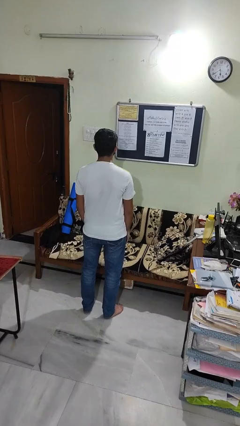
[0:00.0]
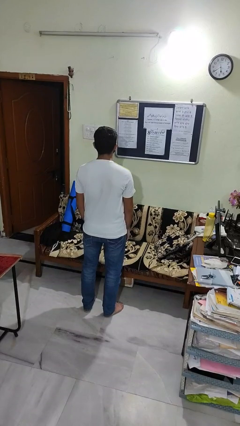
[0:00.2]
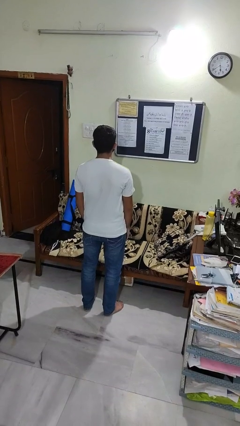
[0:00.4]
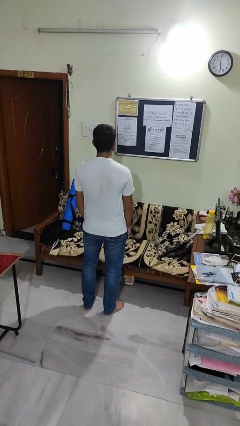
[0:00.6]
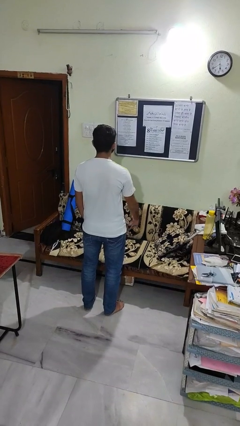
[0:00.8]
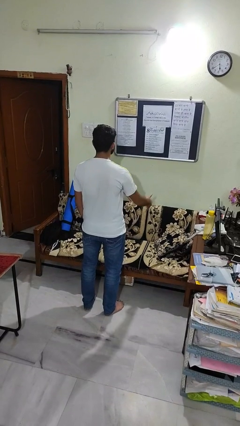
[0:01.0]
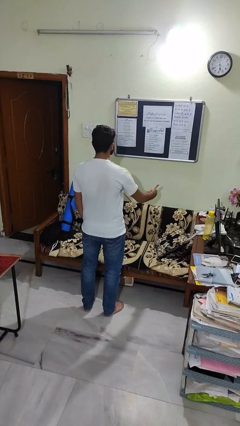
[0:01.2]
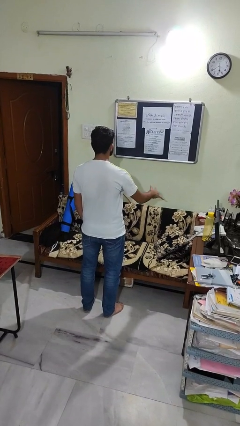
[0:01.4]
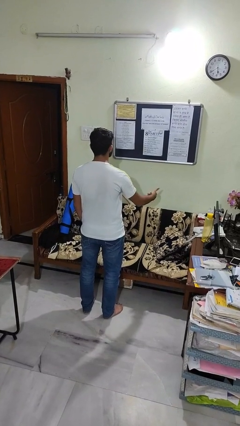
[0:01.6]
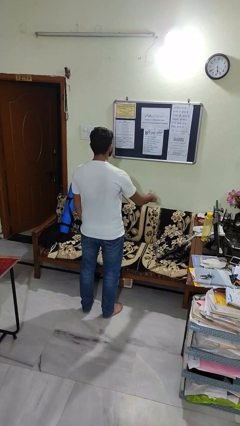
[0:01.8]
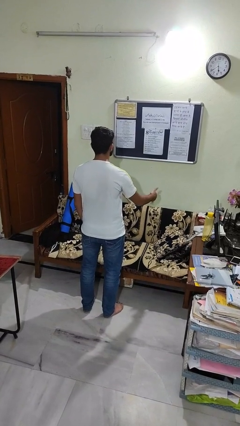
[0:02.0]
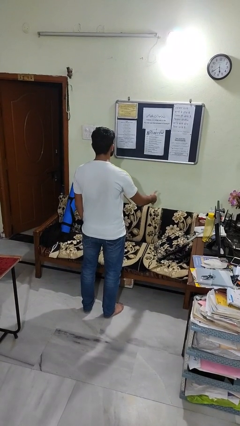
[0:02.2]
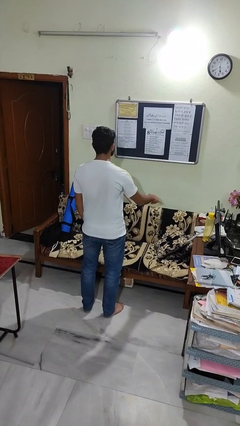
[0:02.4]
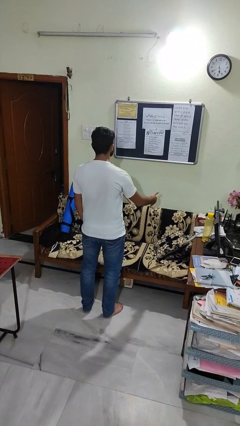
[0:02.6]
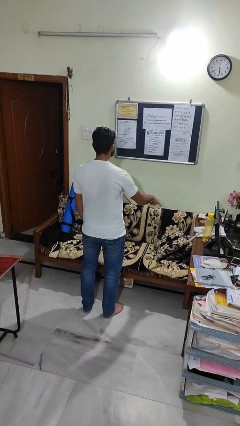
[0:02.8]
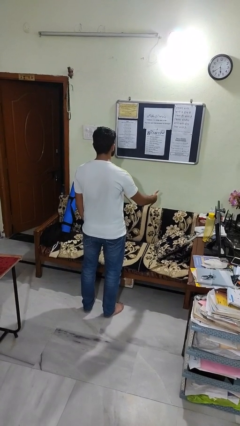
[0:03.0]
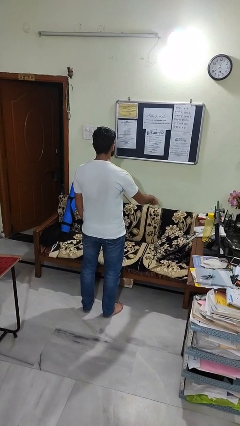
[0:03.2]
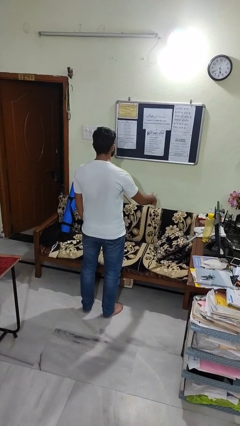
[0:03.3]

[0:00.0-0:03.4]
person gestures hang loose

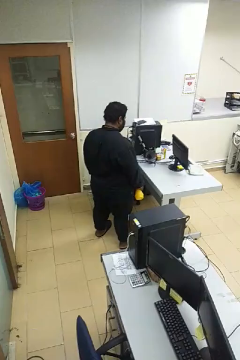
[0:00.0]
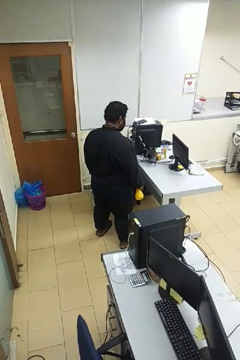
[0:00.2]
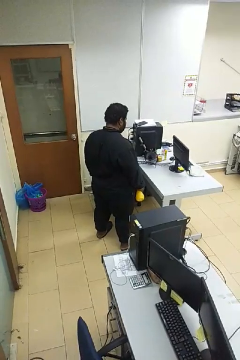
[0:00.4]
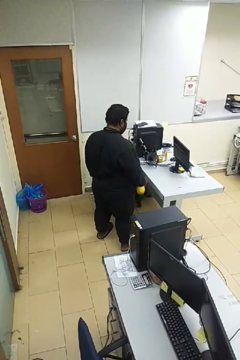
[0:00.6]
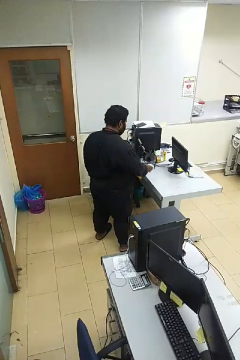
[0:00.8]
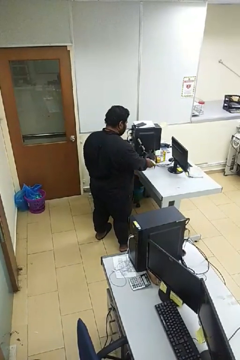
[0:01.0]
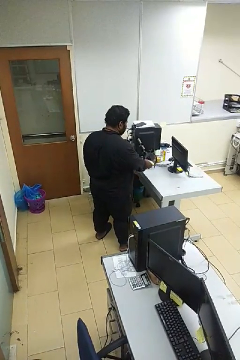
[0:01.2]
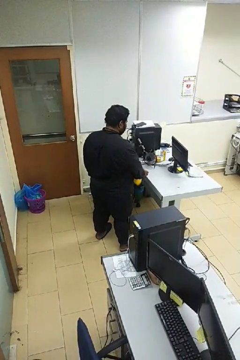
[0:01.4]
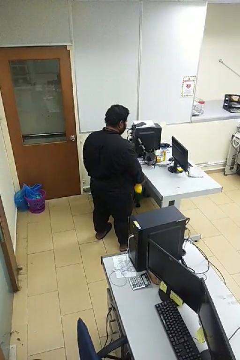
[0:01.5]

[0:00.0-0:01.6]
person sprays from bottle

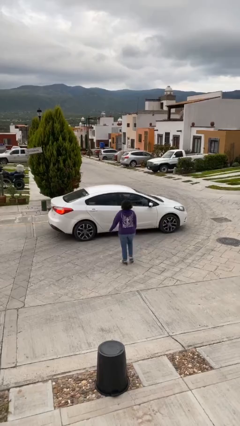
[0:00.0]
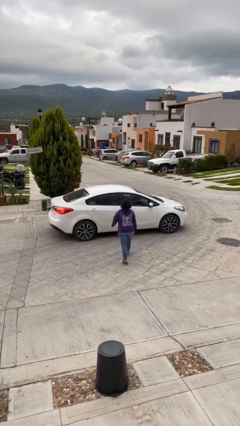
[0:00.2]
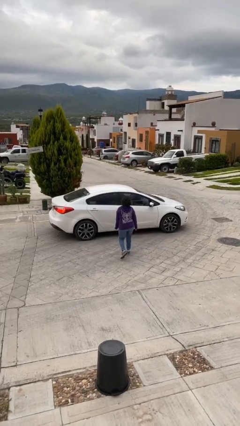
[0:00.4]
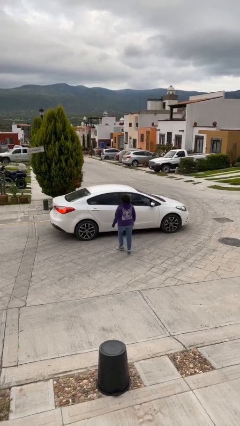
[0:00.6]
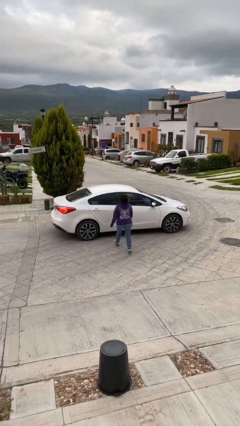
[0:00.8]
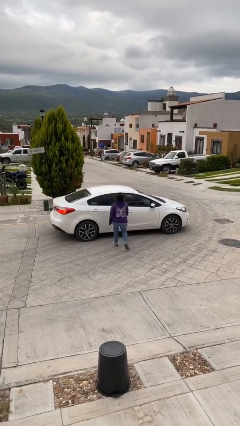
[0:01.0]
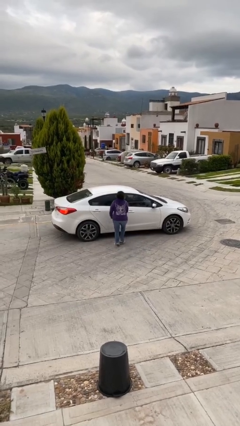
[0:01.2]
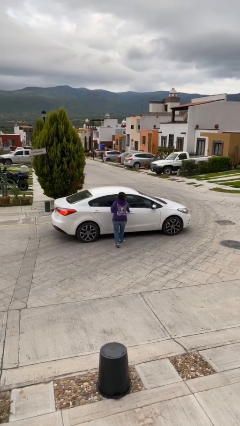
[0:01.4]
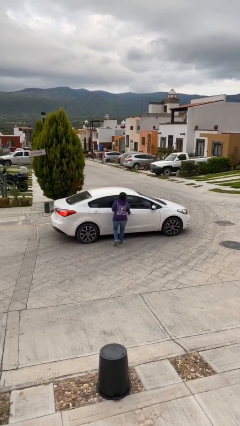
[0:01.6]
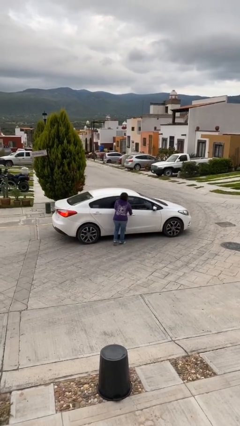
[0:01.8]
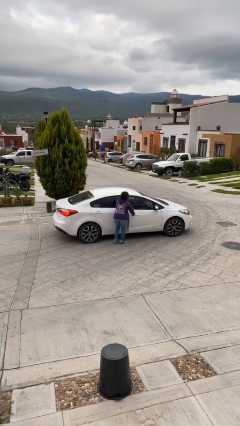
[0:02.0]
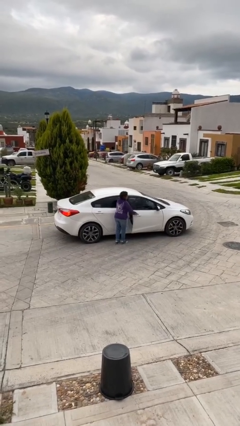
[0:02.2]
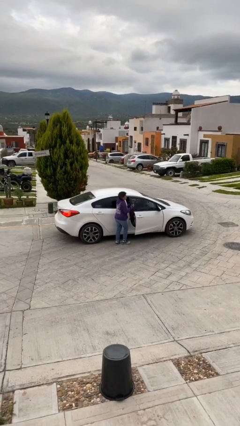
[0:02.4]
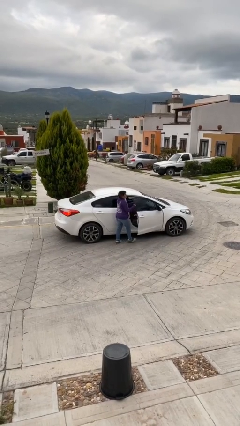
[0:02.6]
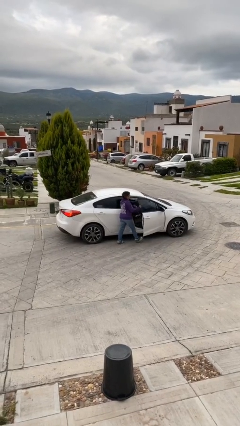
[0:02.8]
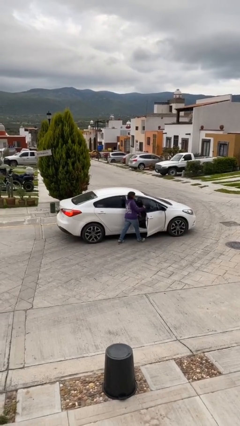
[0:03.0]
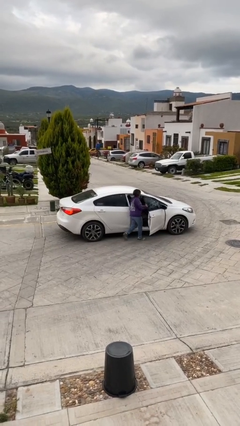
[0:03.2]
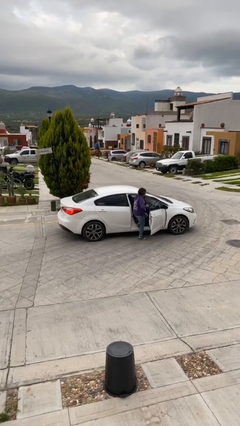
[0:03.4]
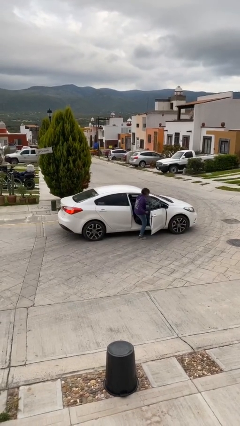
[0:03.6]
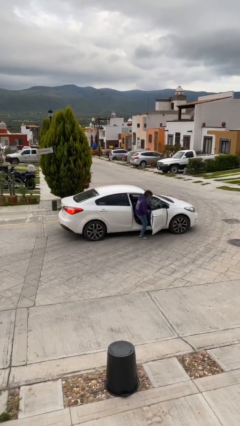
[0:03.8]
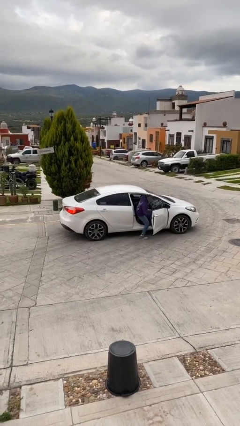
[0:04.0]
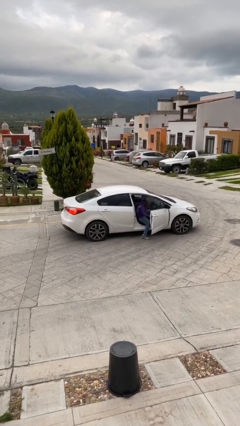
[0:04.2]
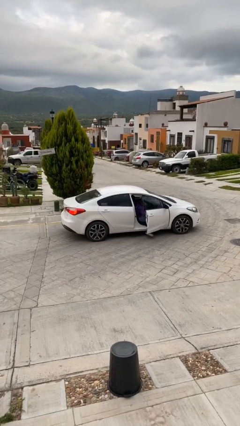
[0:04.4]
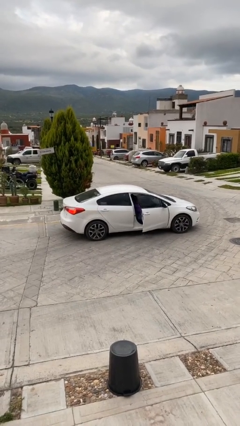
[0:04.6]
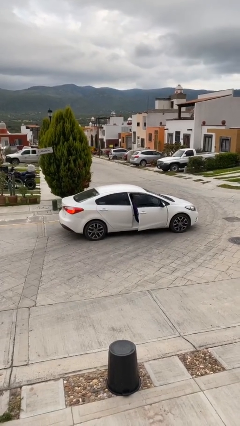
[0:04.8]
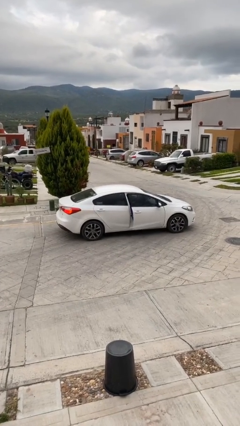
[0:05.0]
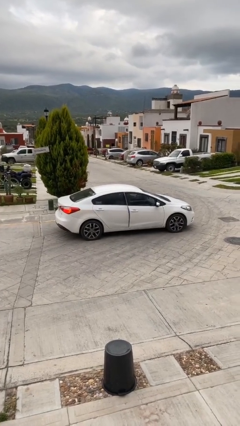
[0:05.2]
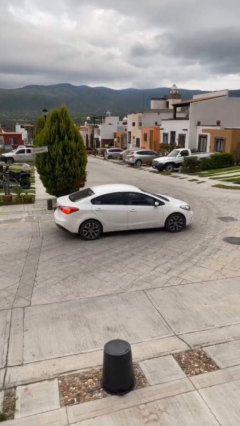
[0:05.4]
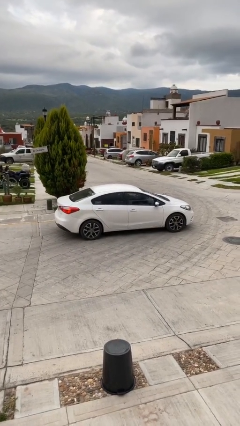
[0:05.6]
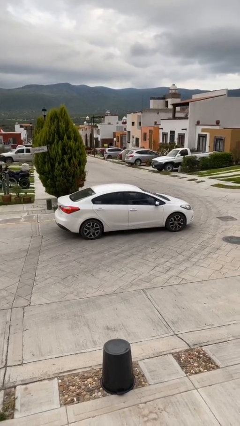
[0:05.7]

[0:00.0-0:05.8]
car picks up person

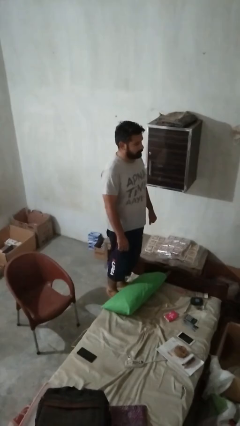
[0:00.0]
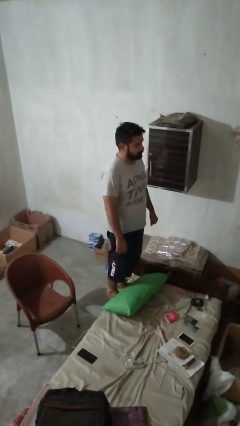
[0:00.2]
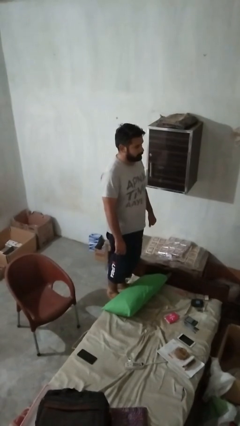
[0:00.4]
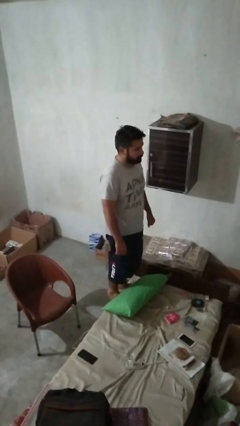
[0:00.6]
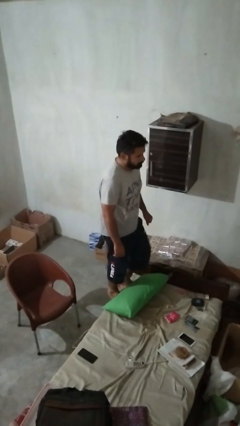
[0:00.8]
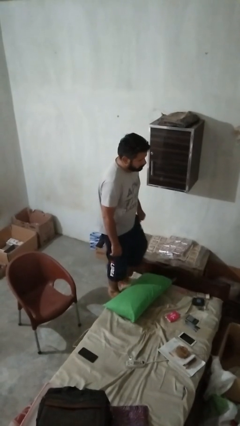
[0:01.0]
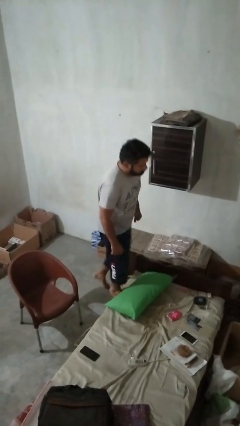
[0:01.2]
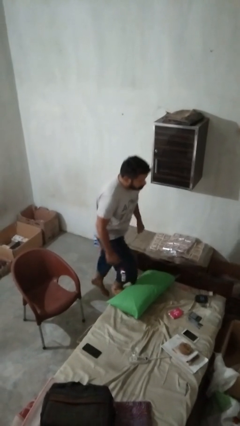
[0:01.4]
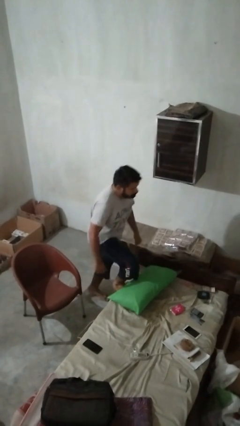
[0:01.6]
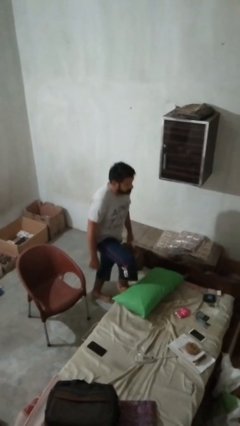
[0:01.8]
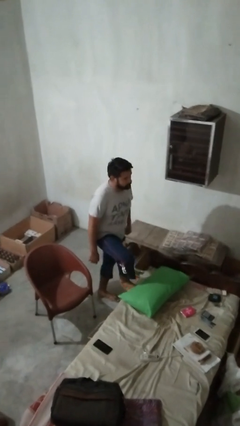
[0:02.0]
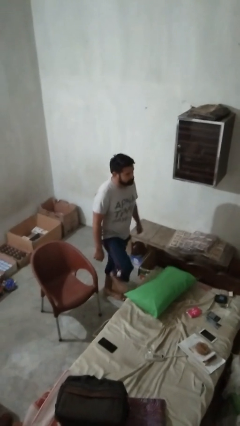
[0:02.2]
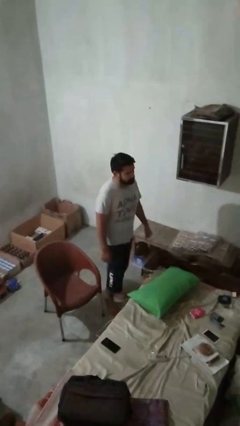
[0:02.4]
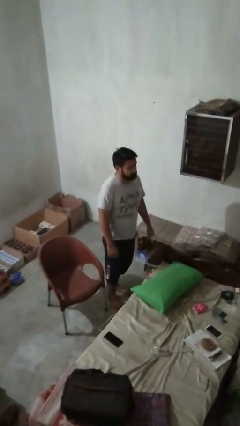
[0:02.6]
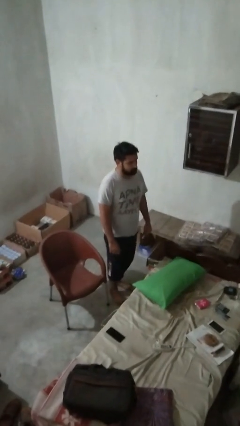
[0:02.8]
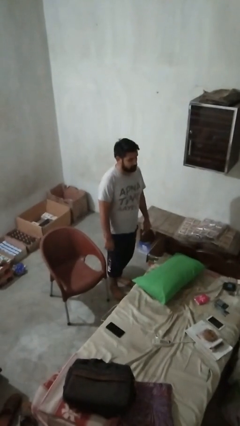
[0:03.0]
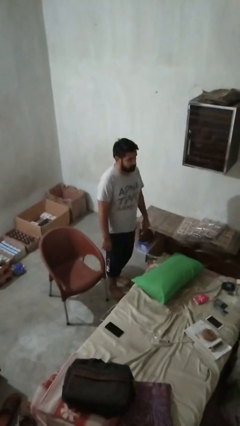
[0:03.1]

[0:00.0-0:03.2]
person climbs off couch

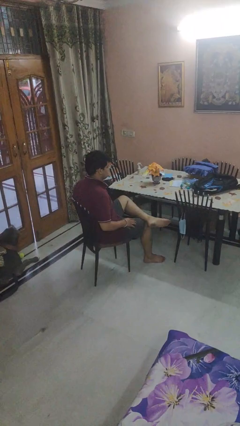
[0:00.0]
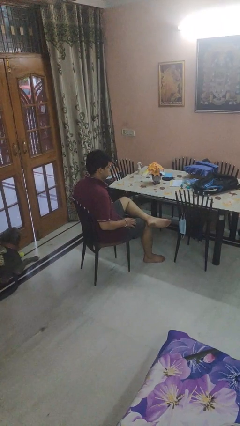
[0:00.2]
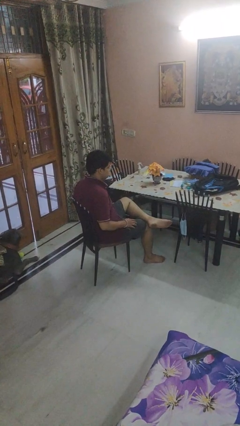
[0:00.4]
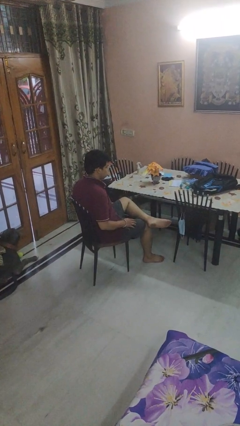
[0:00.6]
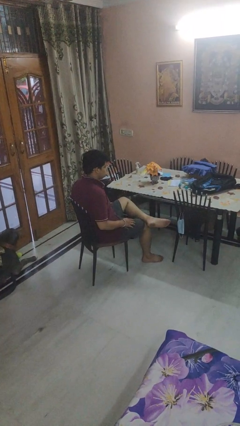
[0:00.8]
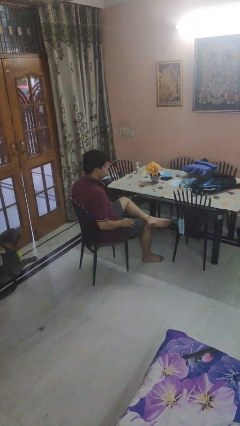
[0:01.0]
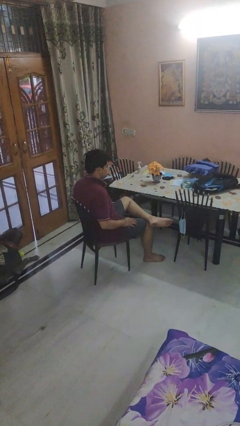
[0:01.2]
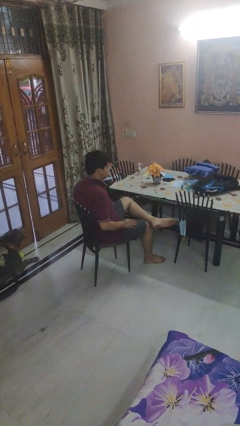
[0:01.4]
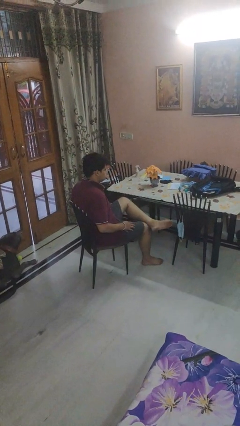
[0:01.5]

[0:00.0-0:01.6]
person crosses legs

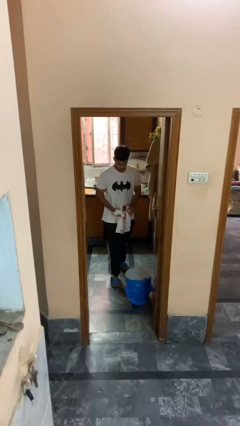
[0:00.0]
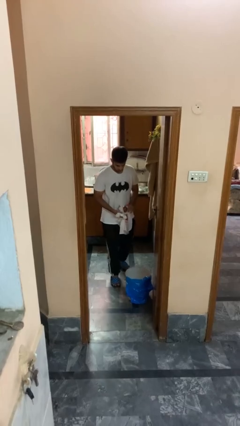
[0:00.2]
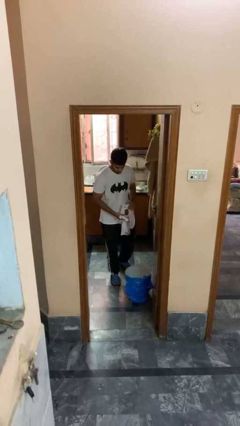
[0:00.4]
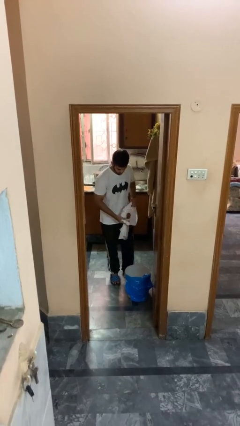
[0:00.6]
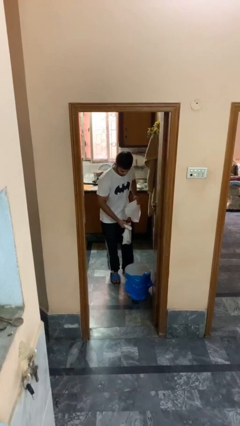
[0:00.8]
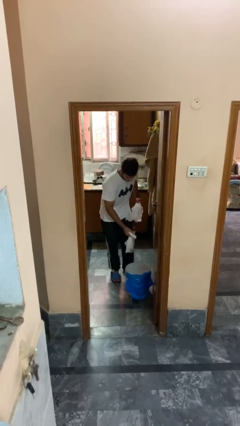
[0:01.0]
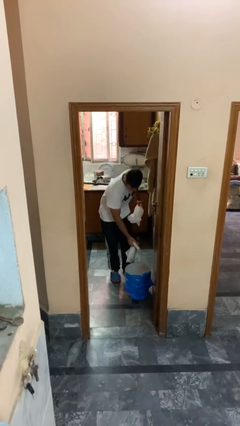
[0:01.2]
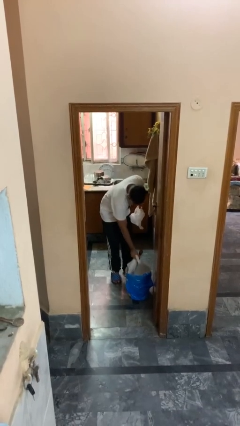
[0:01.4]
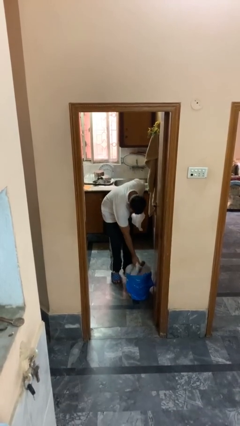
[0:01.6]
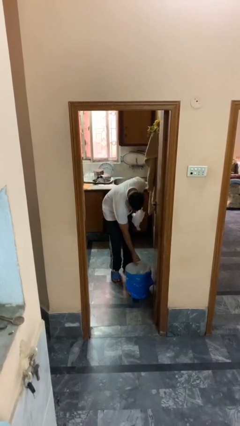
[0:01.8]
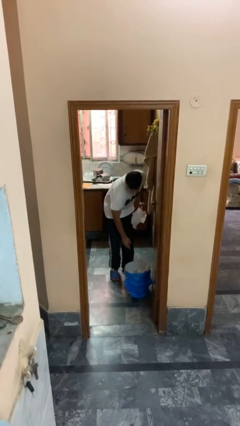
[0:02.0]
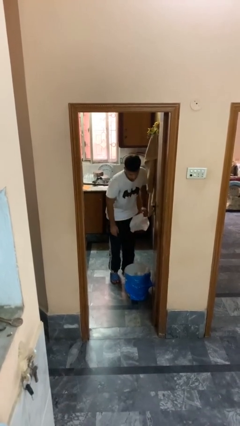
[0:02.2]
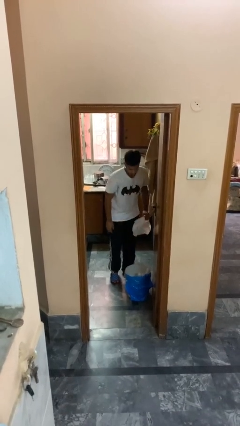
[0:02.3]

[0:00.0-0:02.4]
person discards trash
